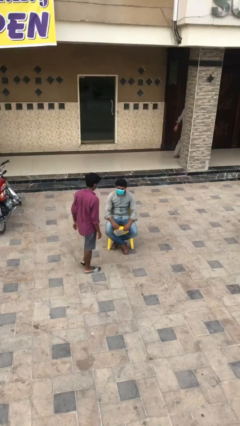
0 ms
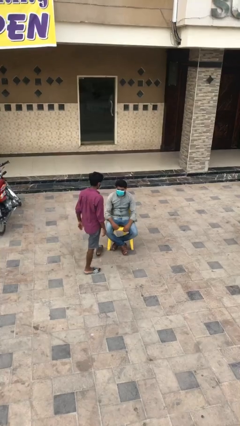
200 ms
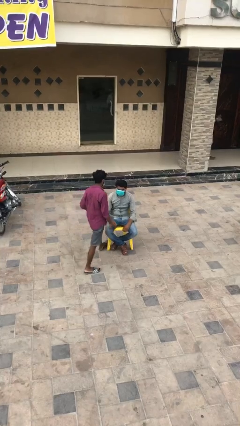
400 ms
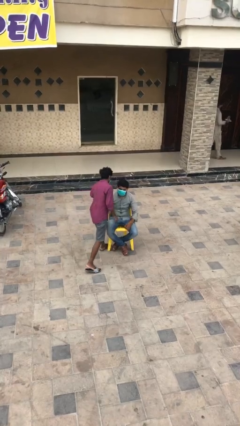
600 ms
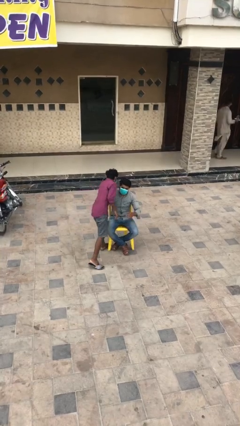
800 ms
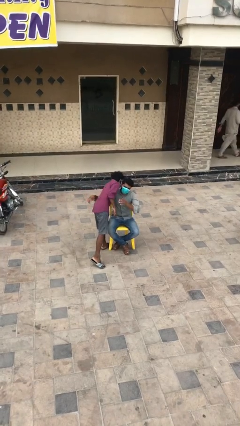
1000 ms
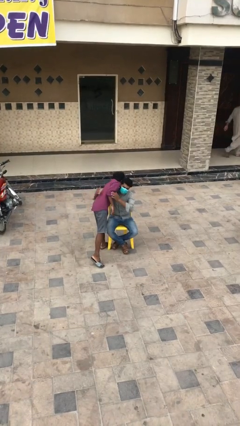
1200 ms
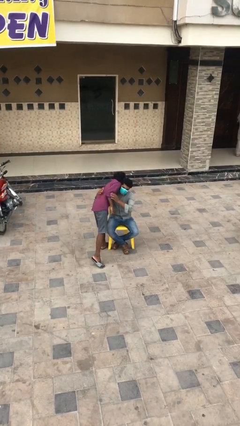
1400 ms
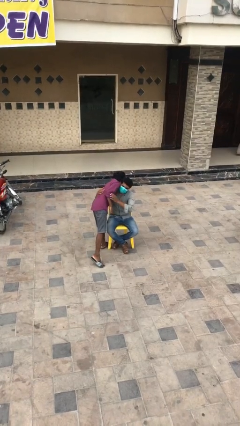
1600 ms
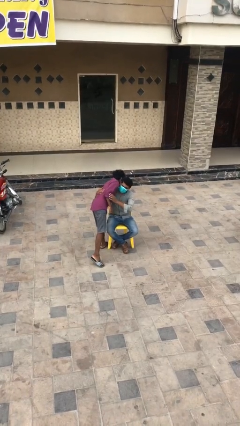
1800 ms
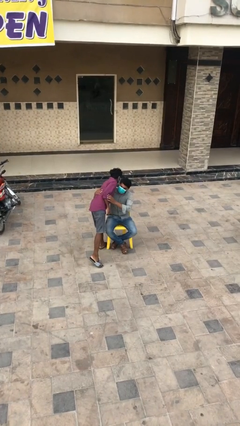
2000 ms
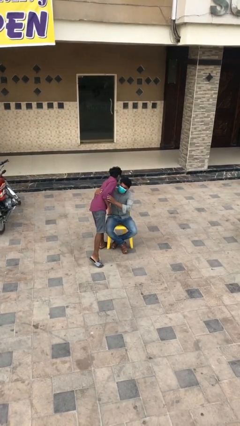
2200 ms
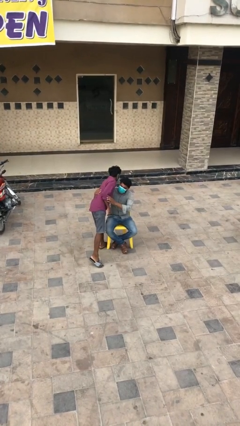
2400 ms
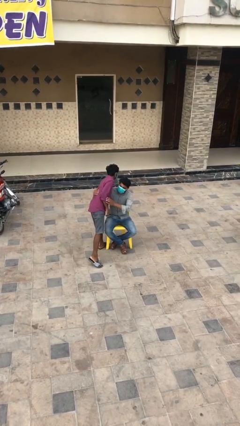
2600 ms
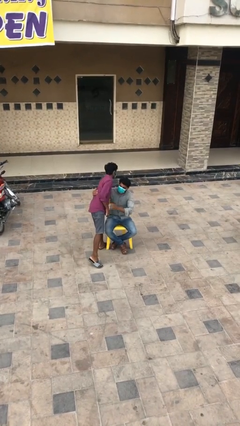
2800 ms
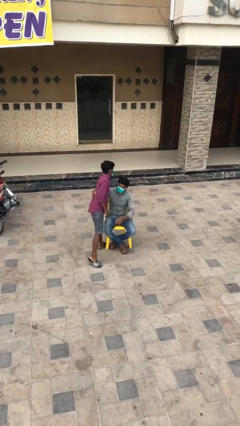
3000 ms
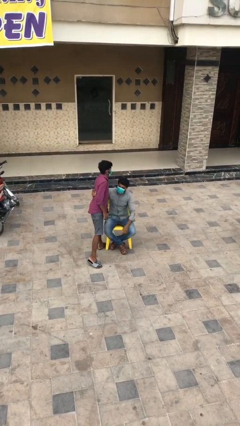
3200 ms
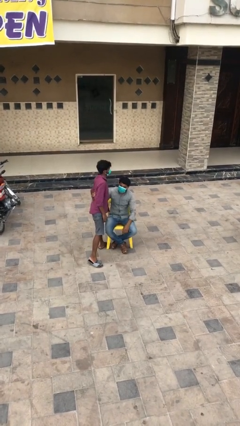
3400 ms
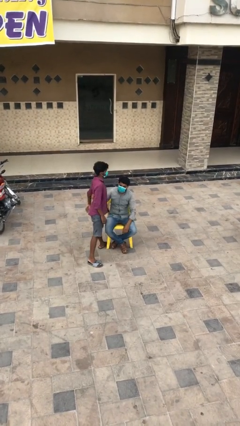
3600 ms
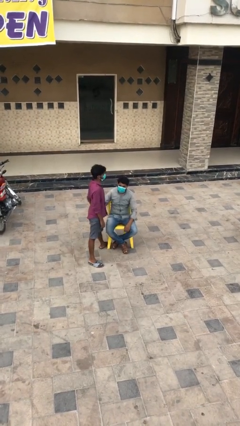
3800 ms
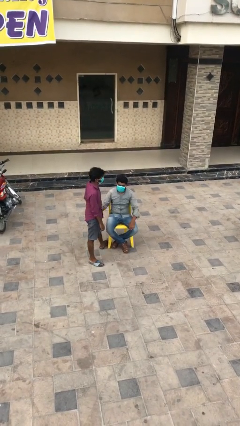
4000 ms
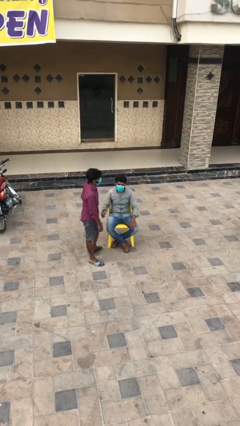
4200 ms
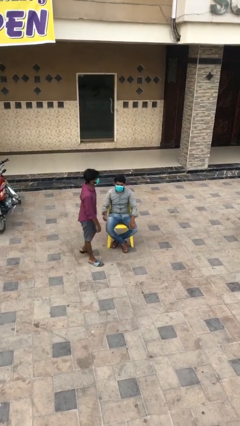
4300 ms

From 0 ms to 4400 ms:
person embraces person

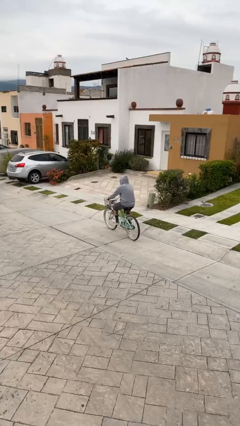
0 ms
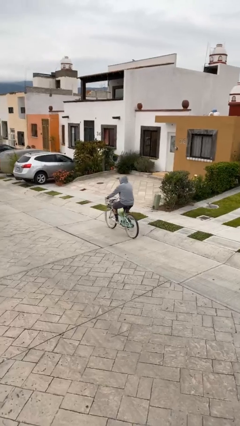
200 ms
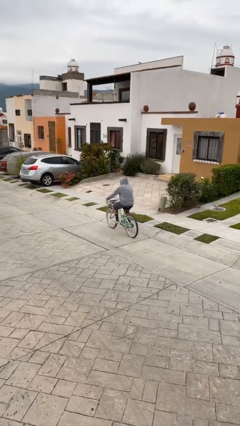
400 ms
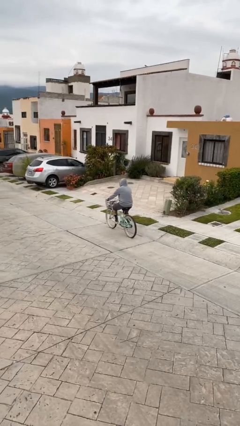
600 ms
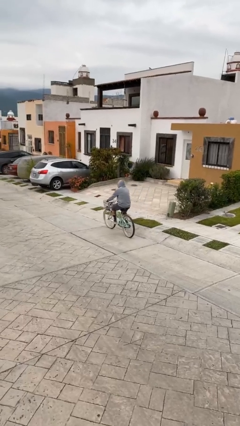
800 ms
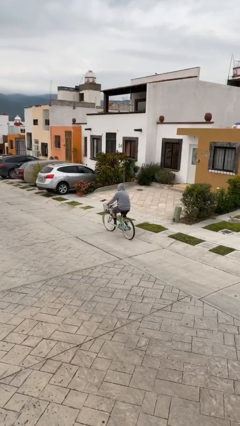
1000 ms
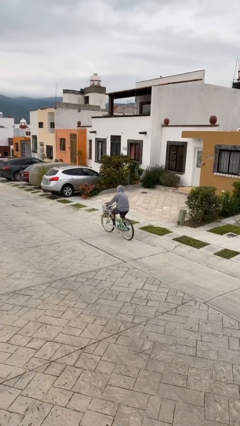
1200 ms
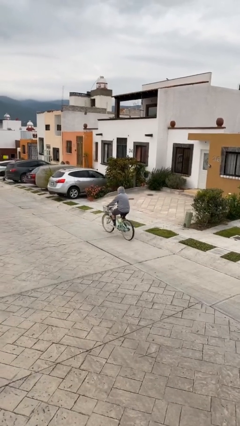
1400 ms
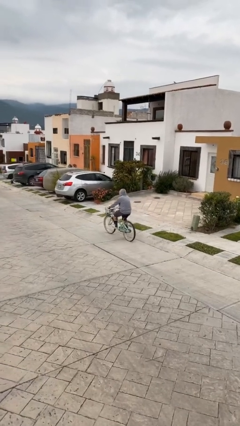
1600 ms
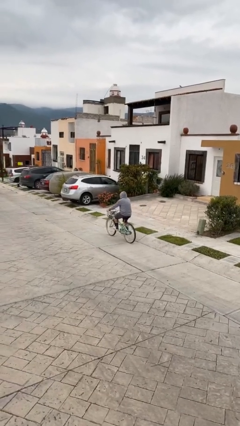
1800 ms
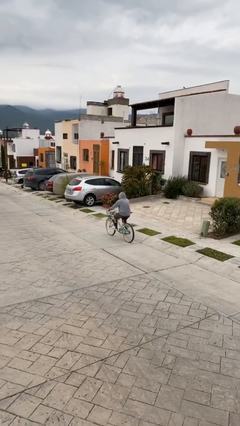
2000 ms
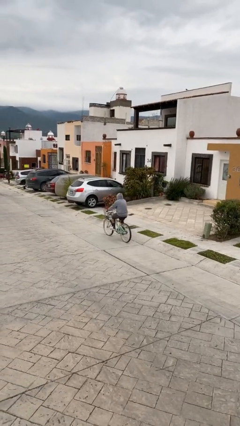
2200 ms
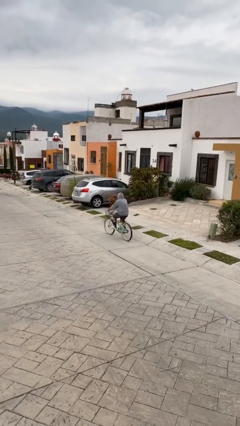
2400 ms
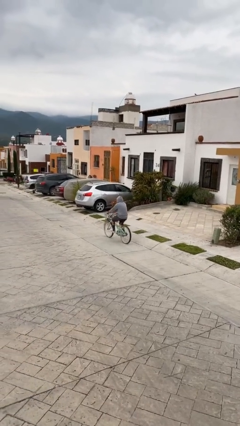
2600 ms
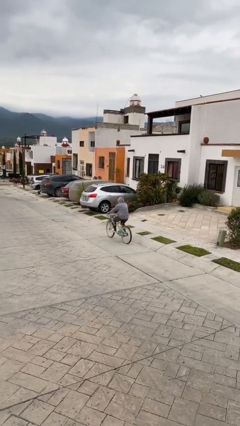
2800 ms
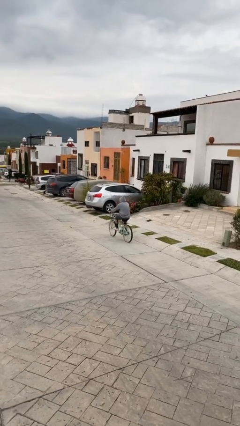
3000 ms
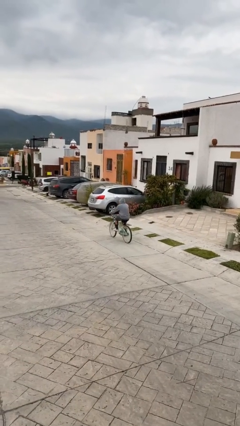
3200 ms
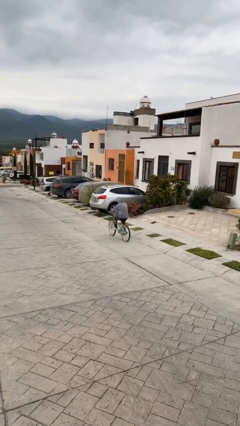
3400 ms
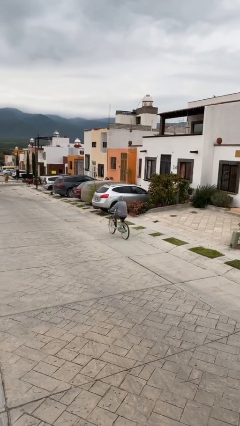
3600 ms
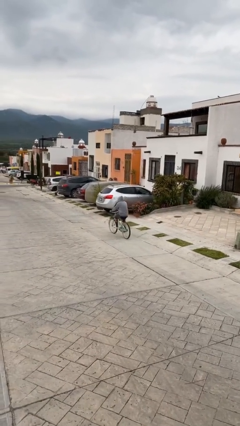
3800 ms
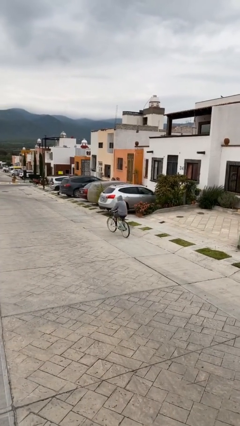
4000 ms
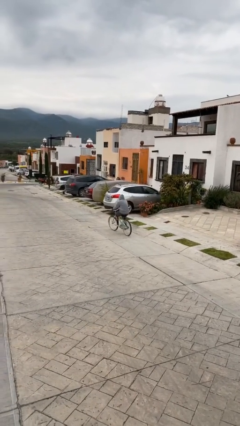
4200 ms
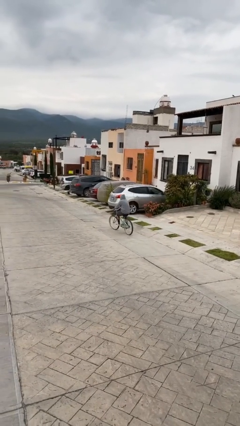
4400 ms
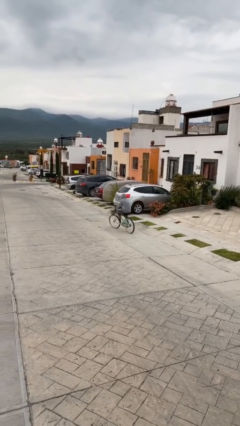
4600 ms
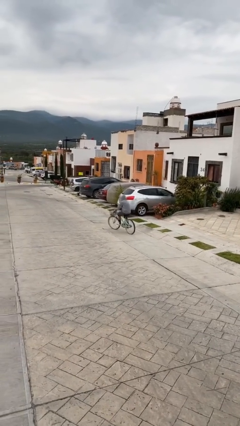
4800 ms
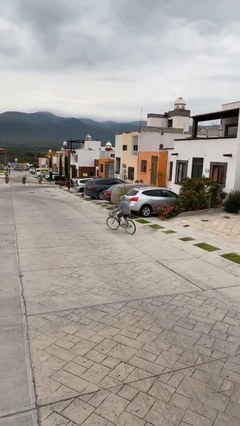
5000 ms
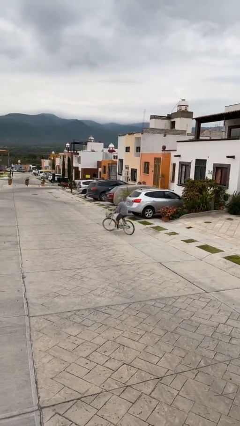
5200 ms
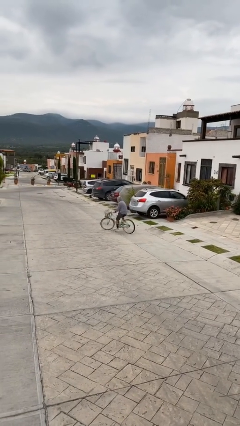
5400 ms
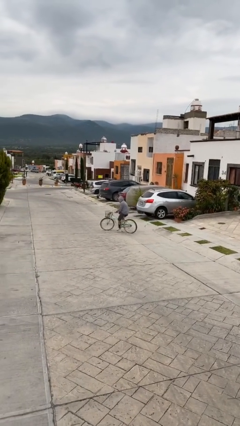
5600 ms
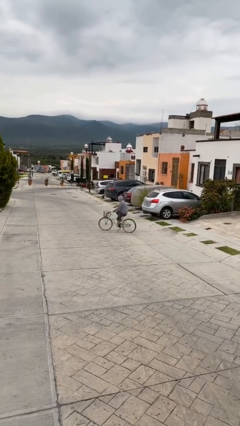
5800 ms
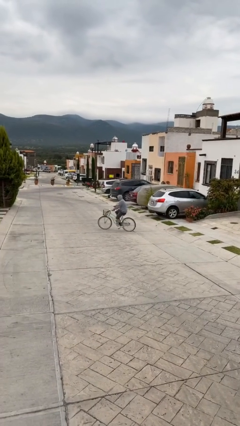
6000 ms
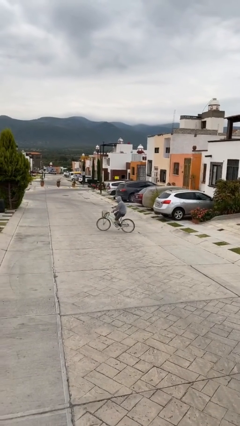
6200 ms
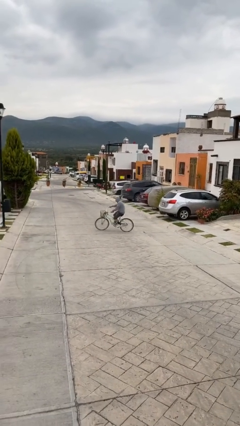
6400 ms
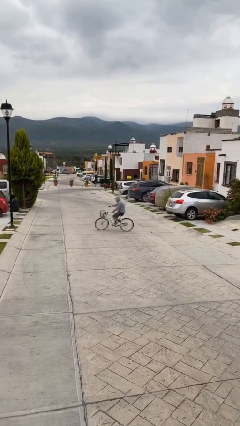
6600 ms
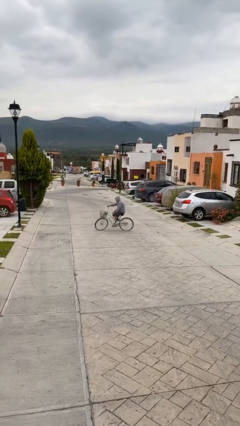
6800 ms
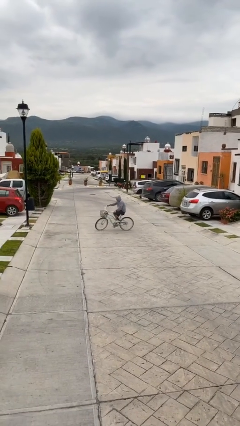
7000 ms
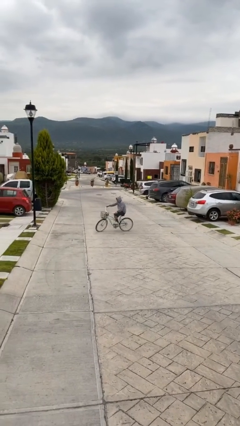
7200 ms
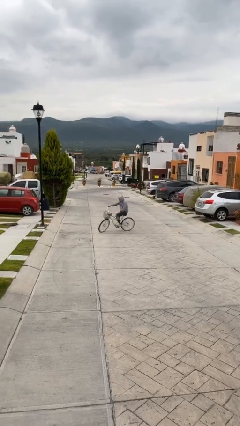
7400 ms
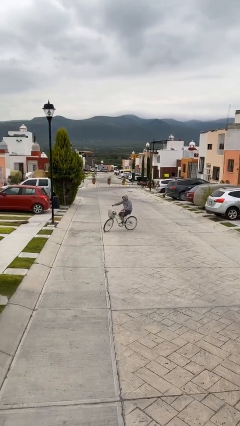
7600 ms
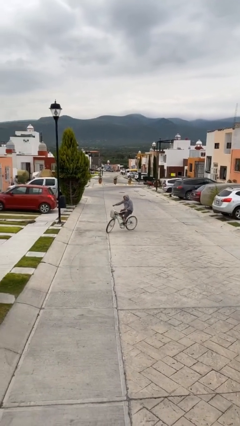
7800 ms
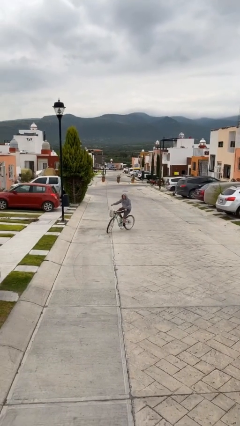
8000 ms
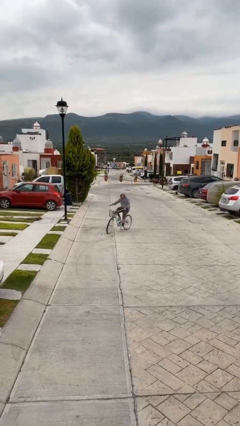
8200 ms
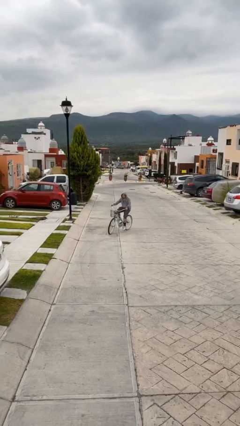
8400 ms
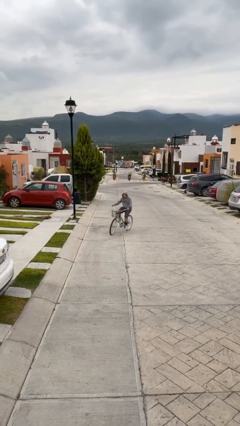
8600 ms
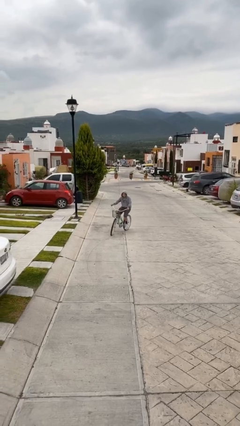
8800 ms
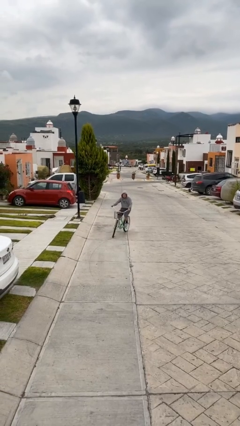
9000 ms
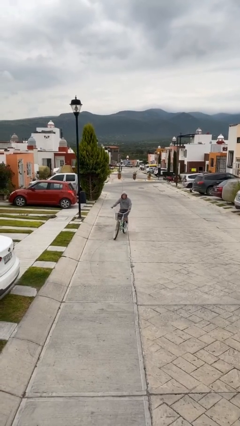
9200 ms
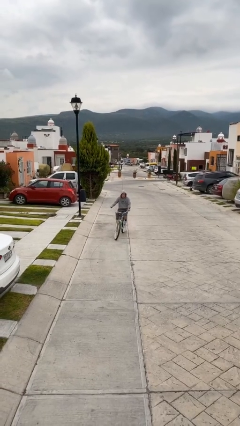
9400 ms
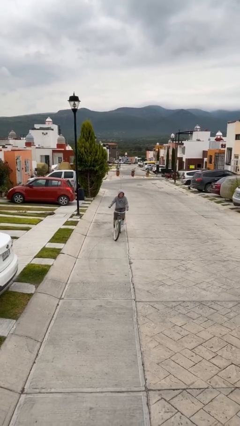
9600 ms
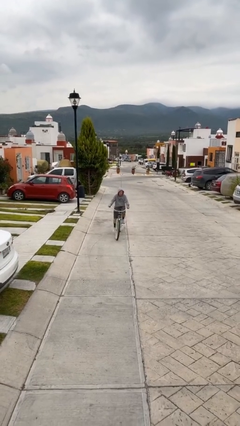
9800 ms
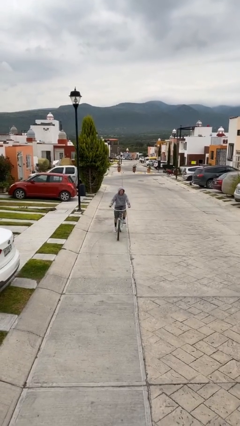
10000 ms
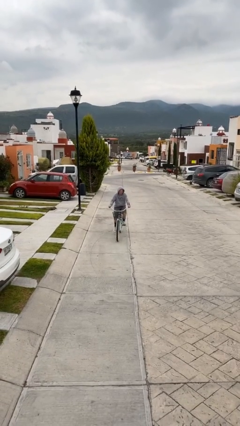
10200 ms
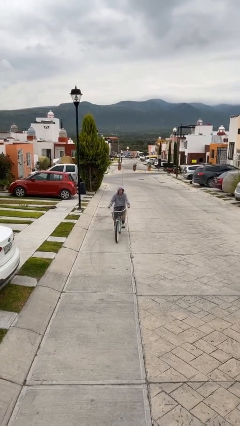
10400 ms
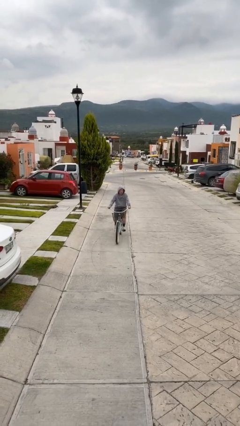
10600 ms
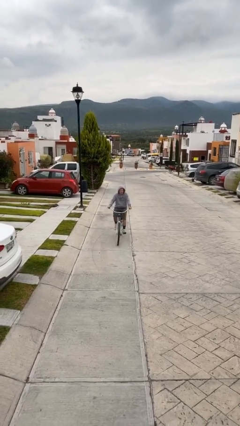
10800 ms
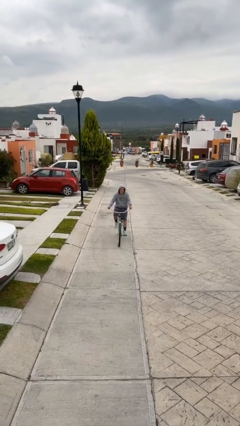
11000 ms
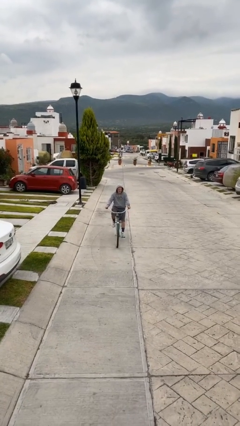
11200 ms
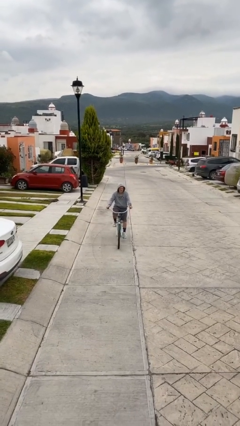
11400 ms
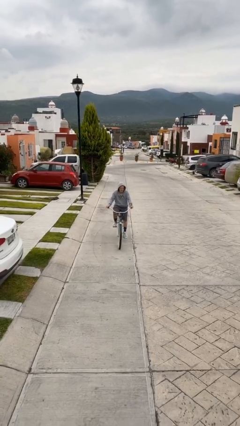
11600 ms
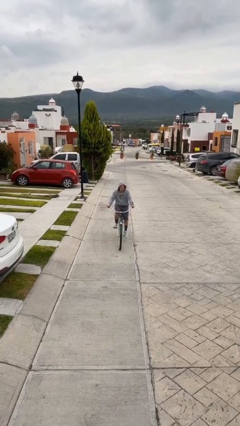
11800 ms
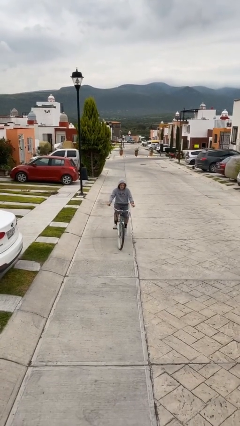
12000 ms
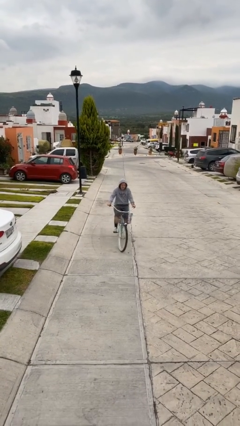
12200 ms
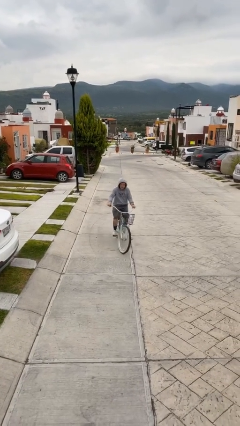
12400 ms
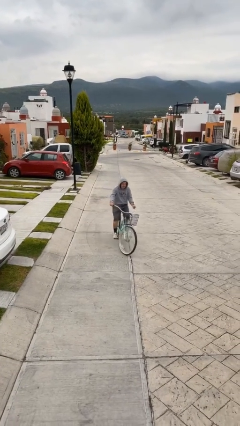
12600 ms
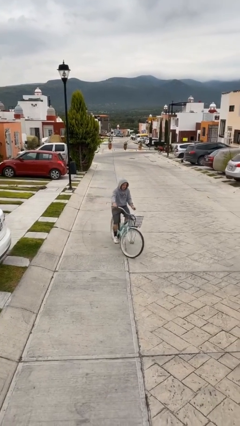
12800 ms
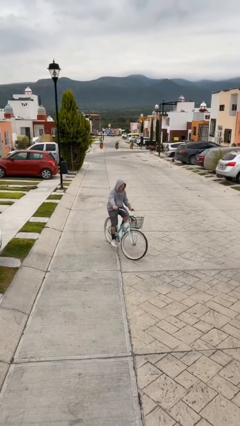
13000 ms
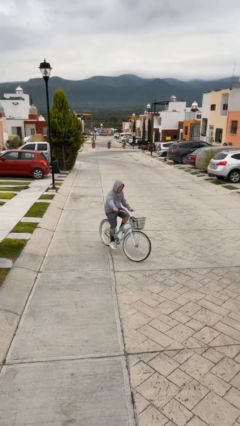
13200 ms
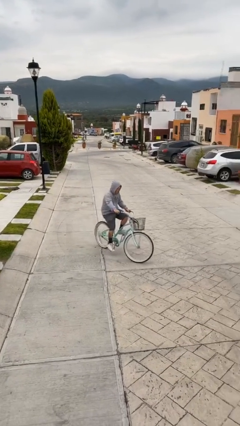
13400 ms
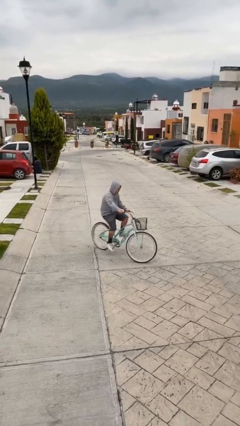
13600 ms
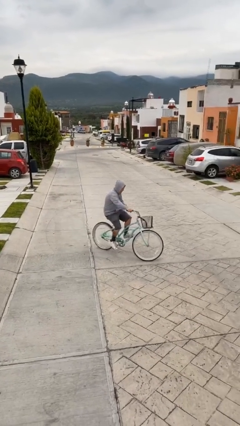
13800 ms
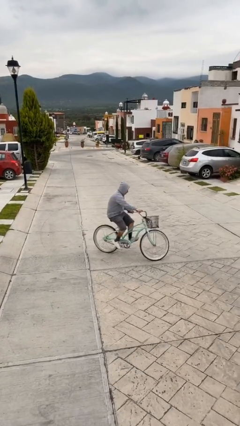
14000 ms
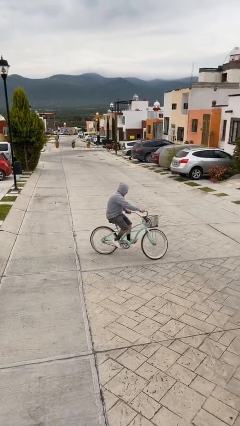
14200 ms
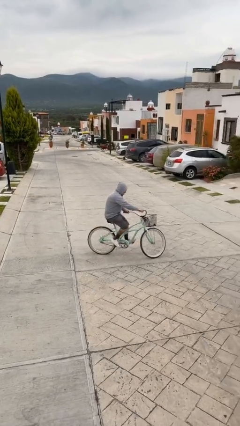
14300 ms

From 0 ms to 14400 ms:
person rides bicycle
